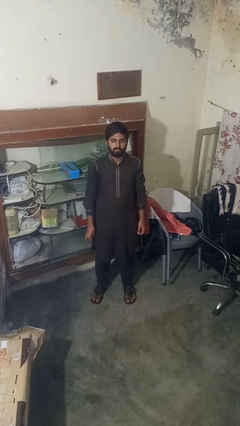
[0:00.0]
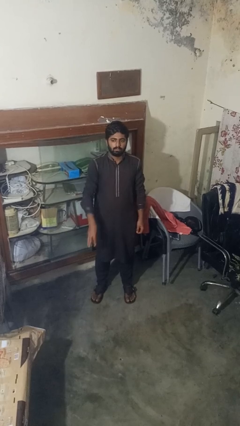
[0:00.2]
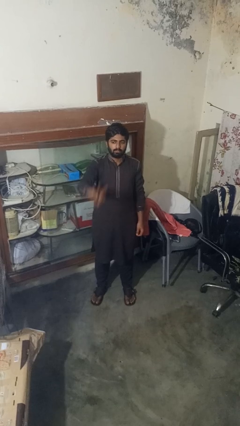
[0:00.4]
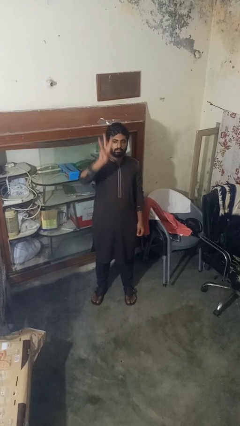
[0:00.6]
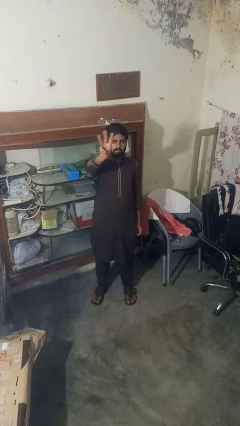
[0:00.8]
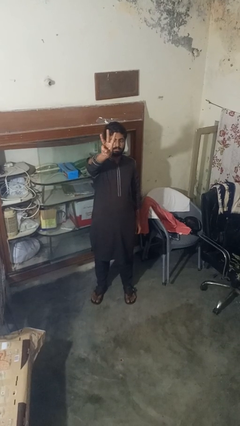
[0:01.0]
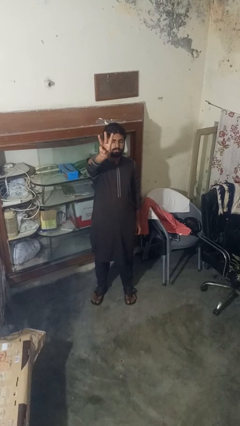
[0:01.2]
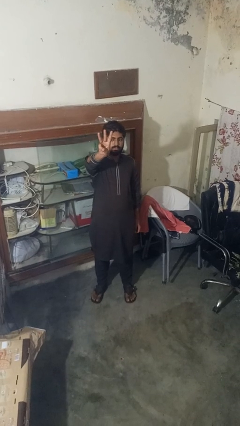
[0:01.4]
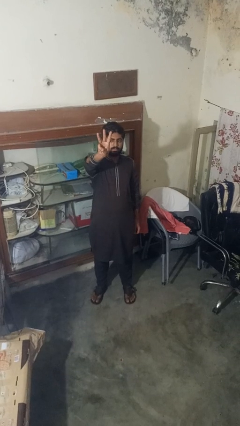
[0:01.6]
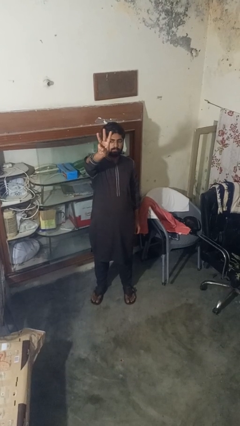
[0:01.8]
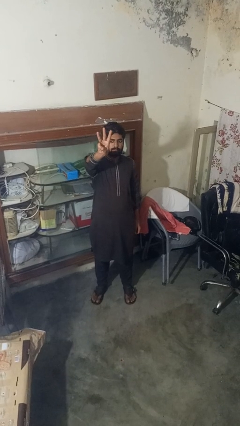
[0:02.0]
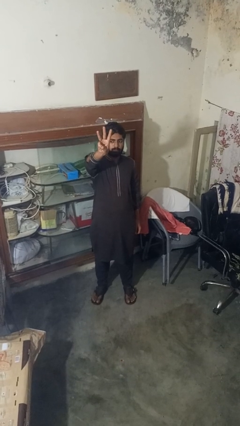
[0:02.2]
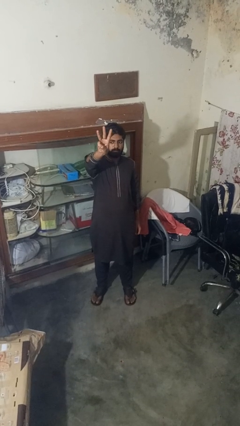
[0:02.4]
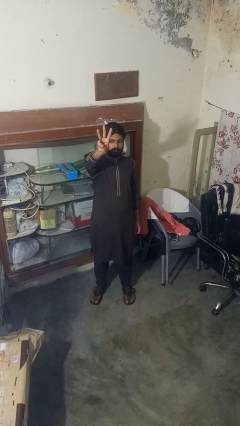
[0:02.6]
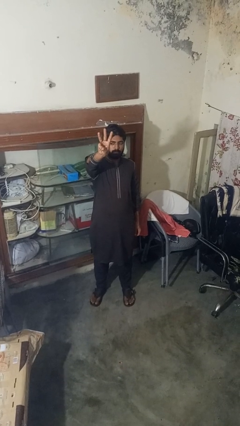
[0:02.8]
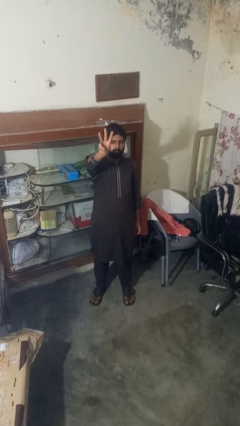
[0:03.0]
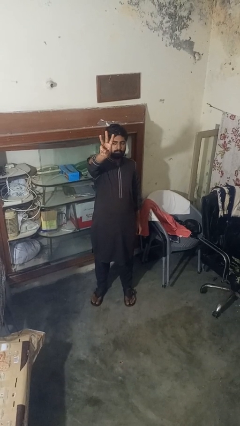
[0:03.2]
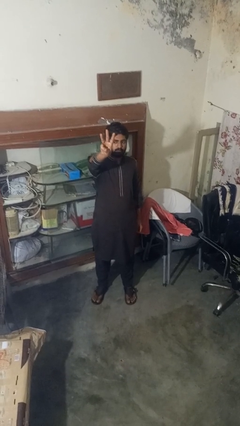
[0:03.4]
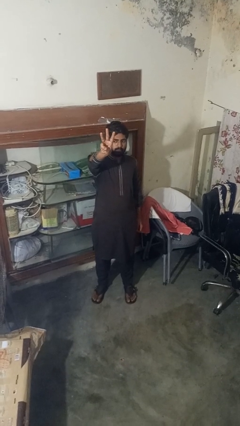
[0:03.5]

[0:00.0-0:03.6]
person gestures number three

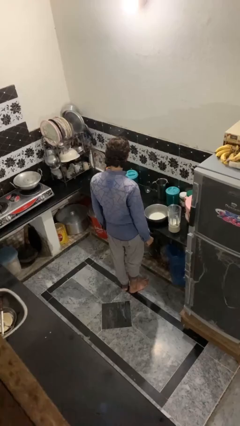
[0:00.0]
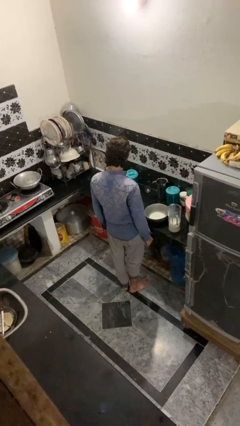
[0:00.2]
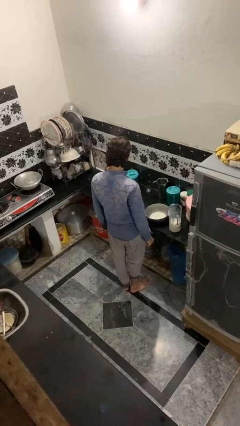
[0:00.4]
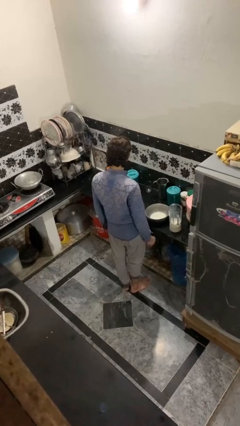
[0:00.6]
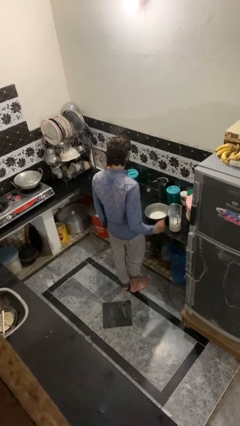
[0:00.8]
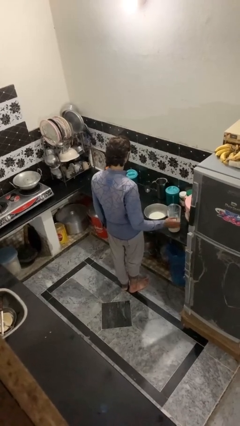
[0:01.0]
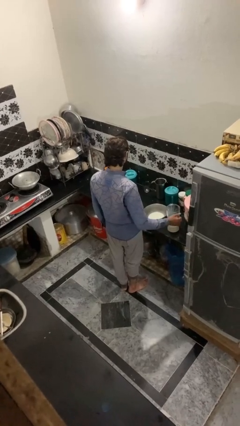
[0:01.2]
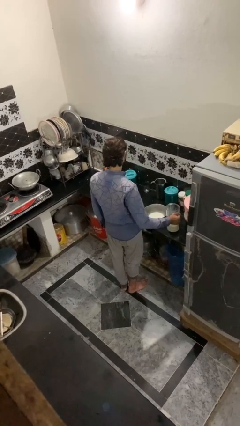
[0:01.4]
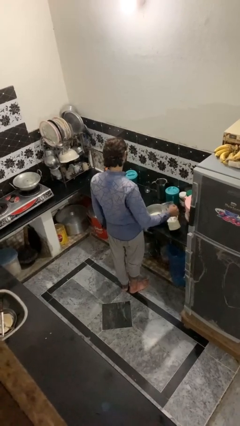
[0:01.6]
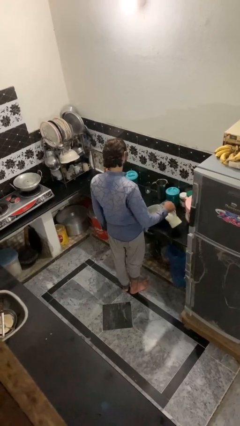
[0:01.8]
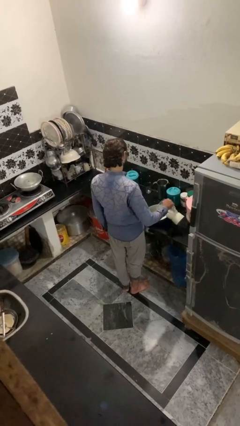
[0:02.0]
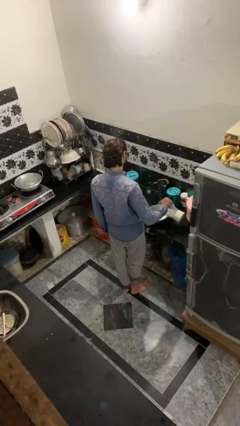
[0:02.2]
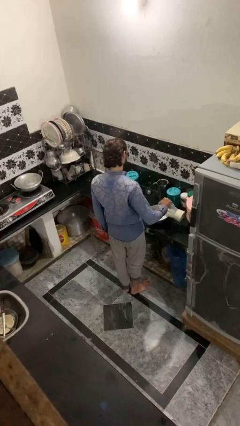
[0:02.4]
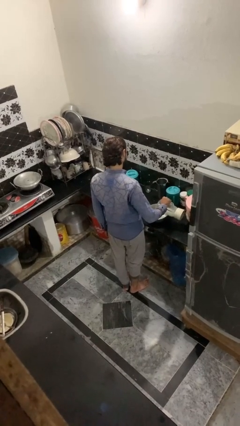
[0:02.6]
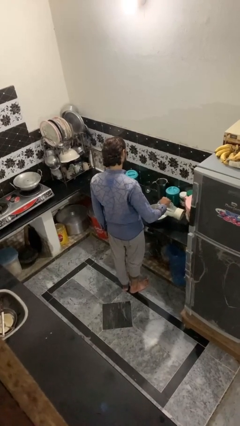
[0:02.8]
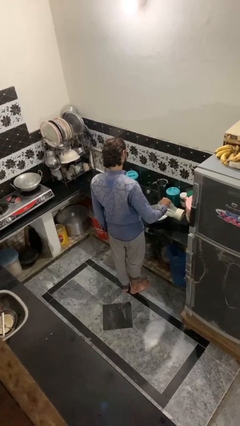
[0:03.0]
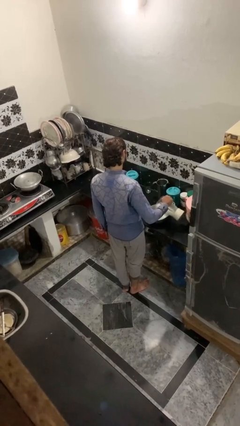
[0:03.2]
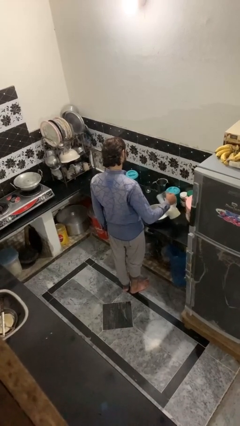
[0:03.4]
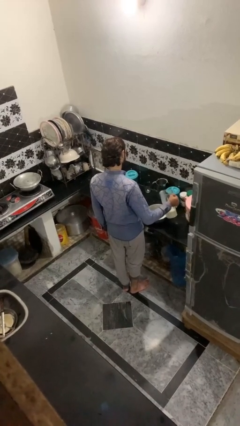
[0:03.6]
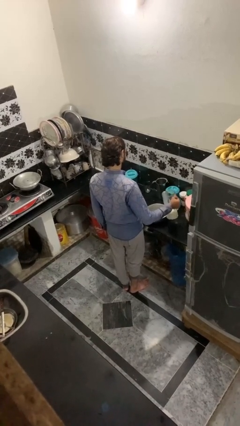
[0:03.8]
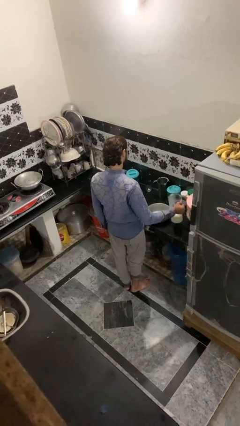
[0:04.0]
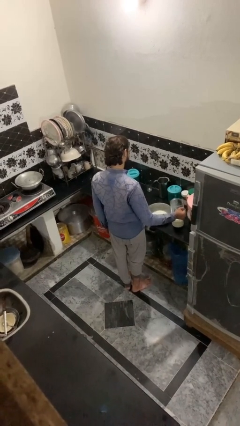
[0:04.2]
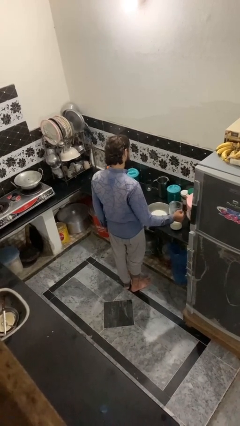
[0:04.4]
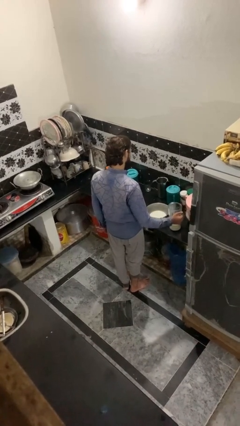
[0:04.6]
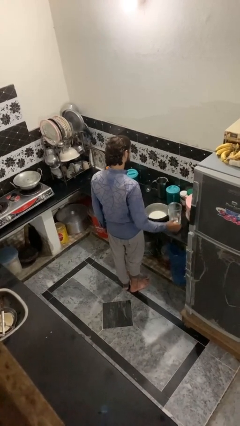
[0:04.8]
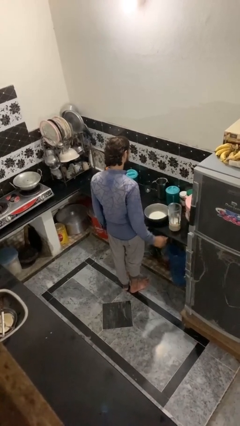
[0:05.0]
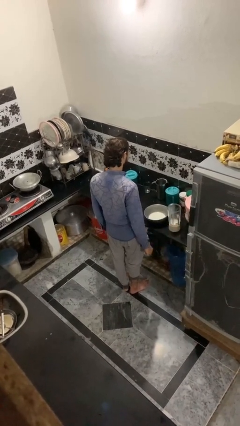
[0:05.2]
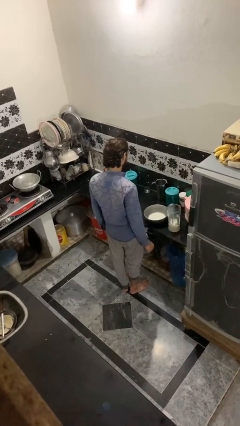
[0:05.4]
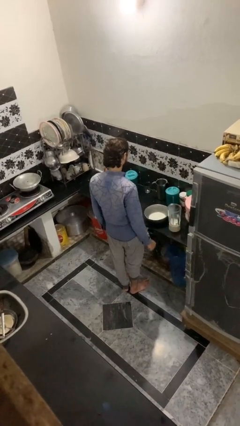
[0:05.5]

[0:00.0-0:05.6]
person pours into bowl

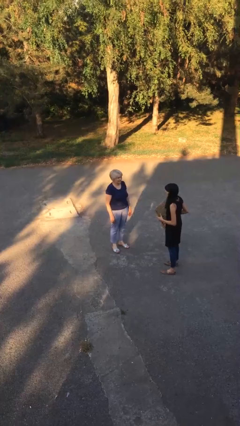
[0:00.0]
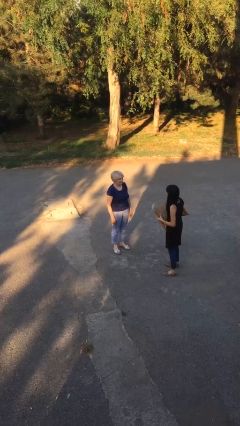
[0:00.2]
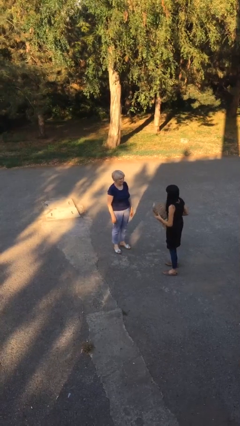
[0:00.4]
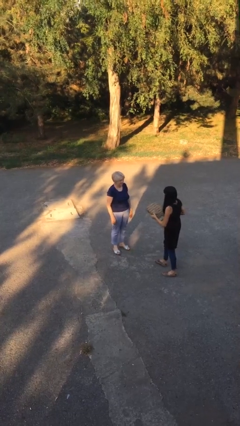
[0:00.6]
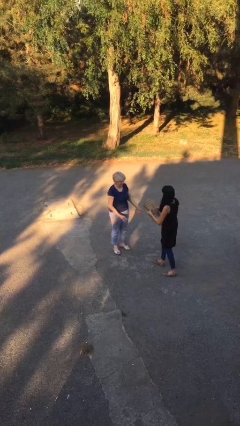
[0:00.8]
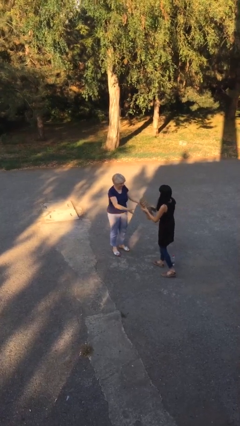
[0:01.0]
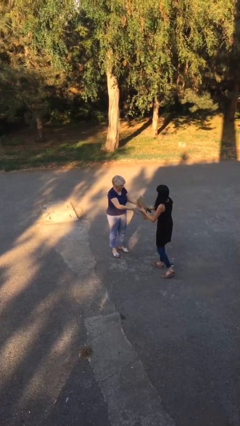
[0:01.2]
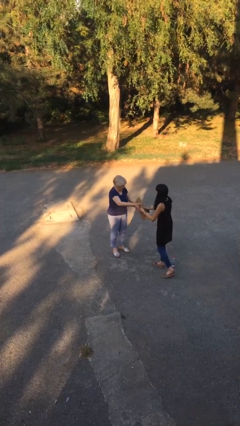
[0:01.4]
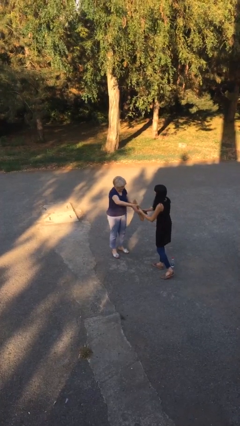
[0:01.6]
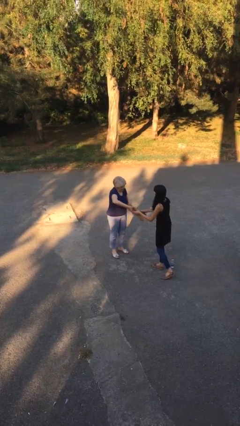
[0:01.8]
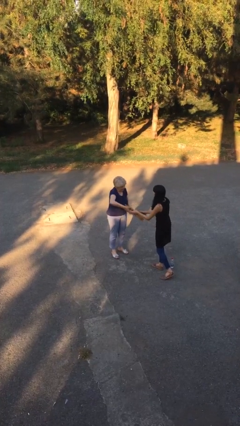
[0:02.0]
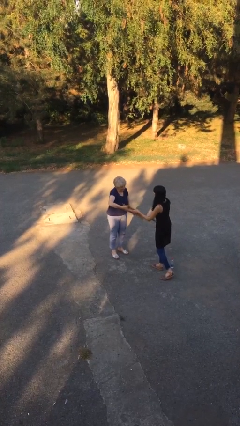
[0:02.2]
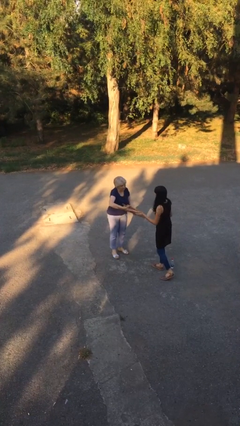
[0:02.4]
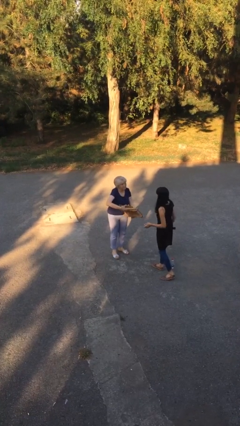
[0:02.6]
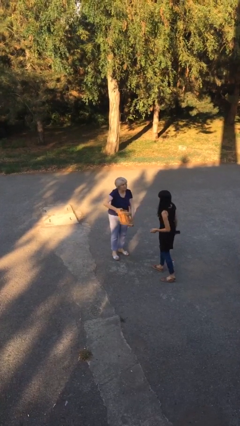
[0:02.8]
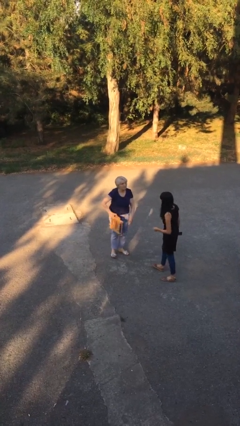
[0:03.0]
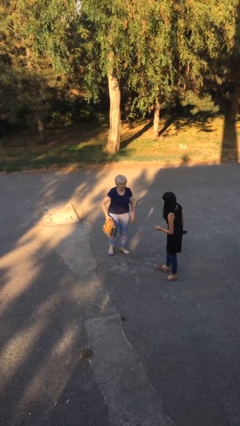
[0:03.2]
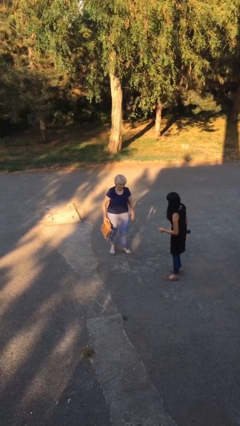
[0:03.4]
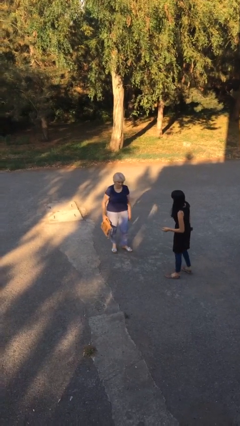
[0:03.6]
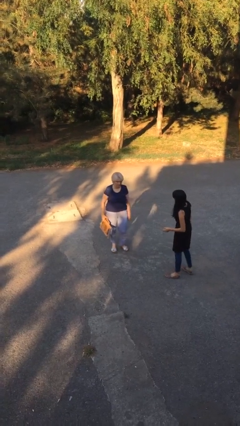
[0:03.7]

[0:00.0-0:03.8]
person transfers object to person

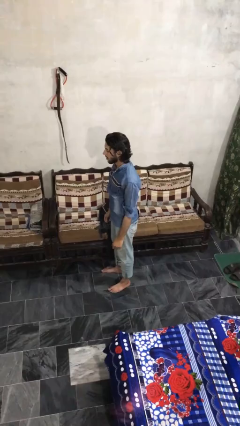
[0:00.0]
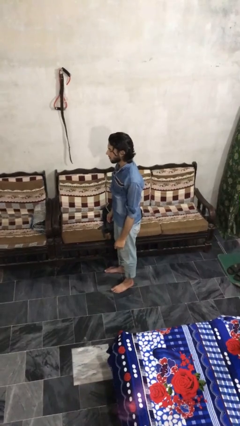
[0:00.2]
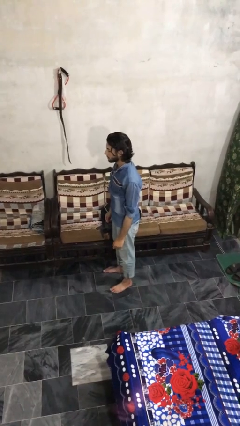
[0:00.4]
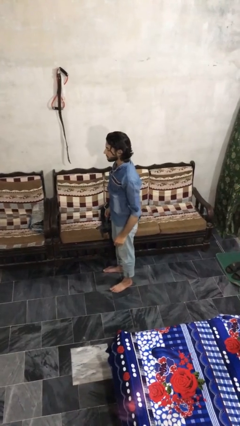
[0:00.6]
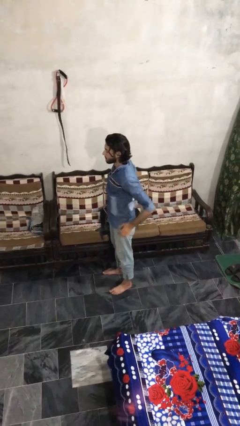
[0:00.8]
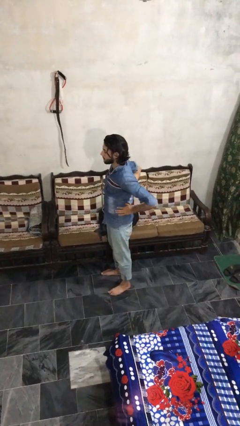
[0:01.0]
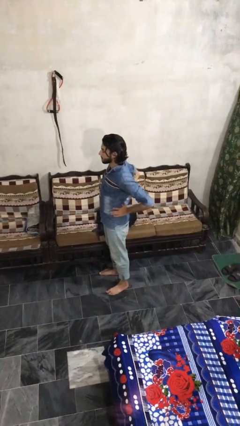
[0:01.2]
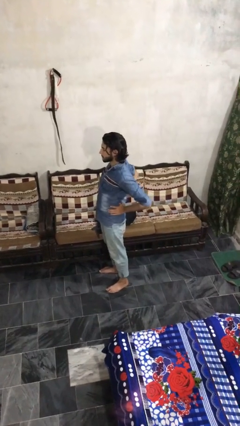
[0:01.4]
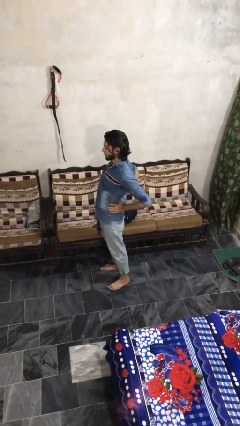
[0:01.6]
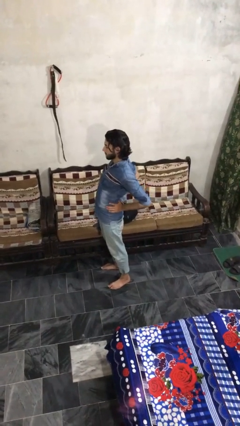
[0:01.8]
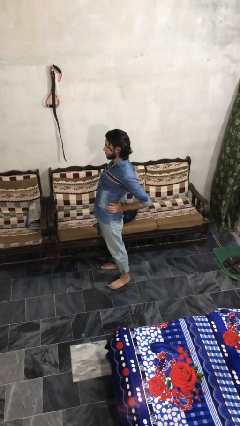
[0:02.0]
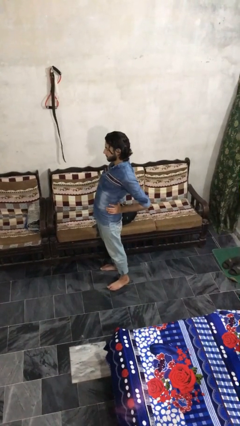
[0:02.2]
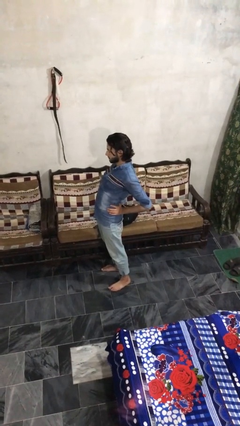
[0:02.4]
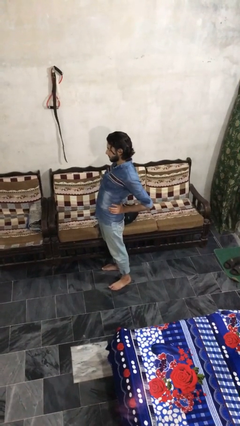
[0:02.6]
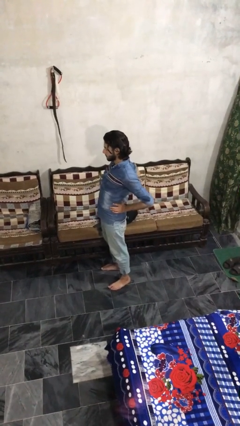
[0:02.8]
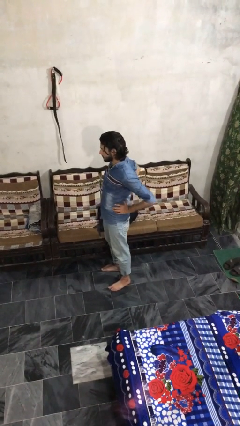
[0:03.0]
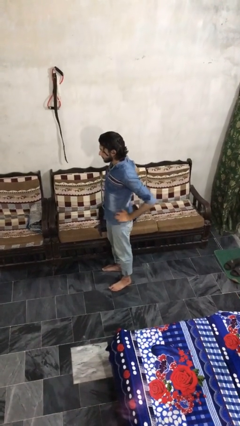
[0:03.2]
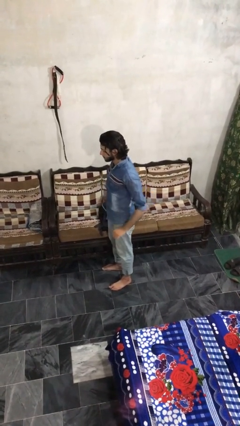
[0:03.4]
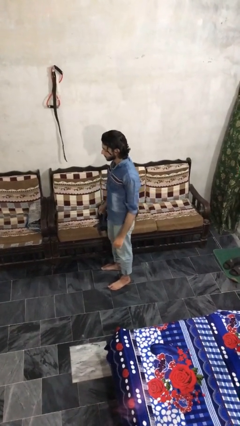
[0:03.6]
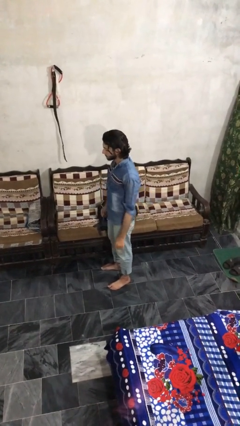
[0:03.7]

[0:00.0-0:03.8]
person stretches back

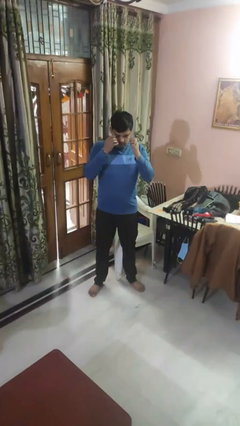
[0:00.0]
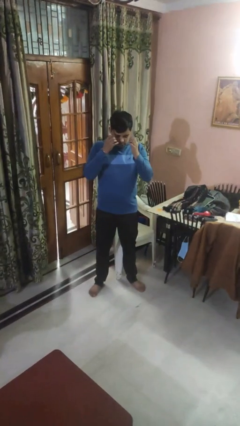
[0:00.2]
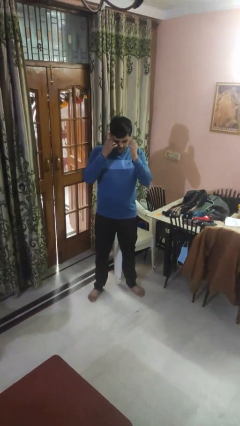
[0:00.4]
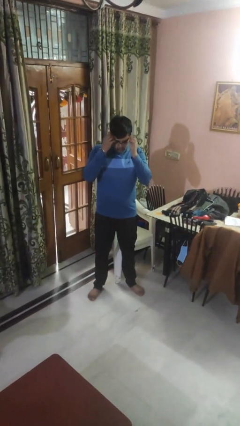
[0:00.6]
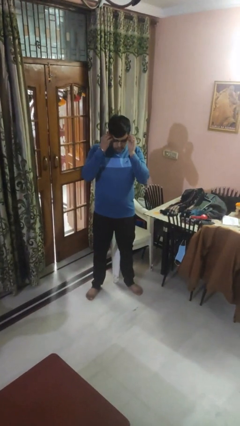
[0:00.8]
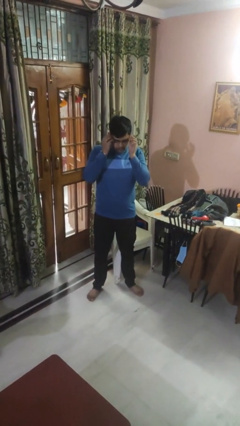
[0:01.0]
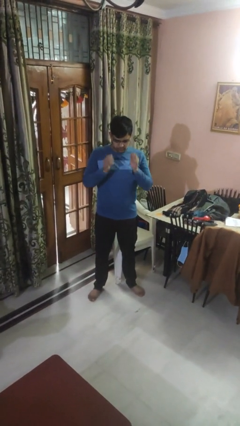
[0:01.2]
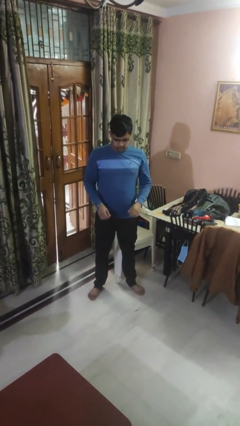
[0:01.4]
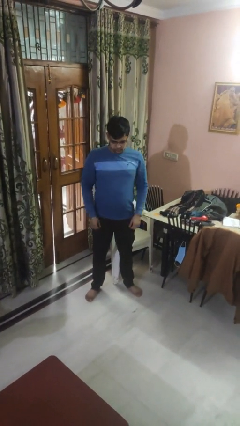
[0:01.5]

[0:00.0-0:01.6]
person puts on glasses
